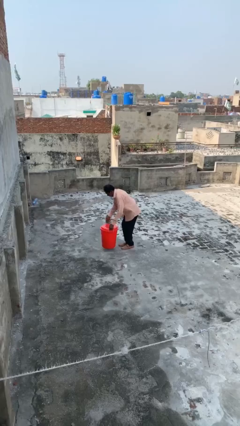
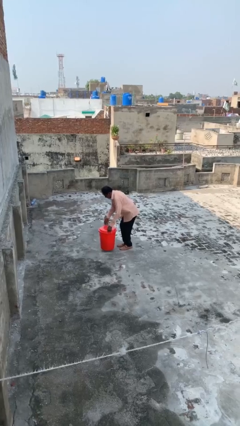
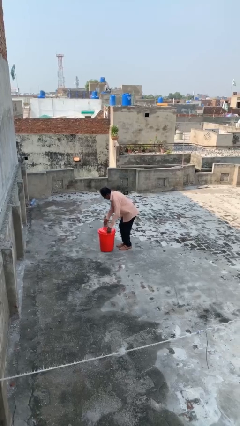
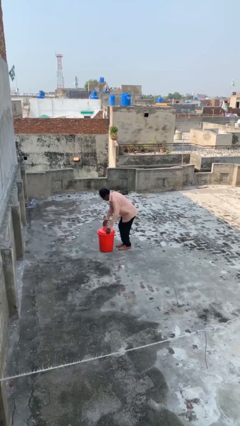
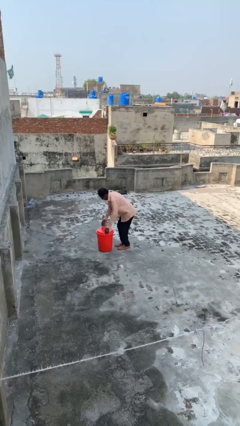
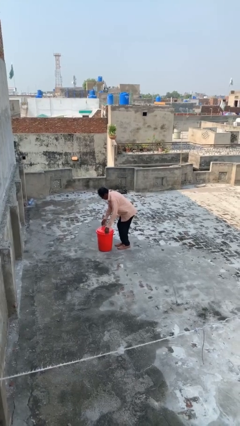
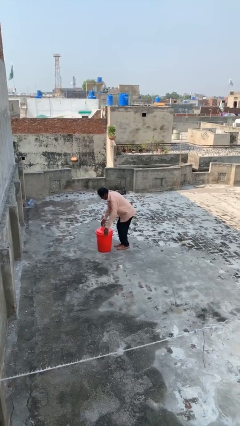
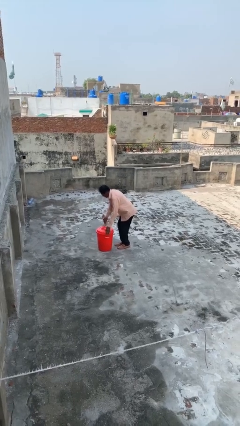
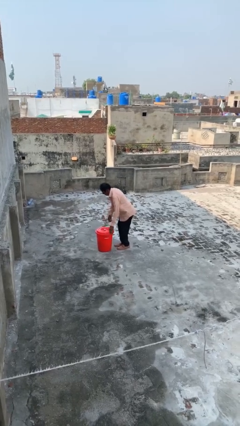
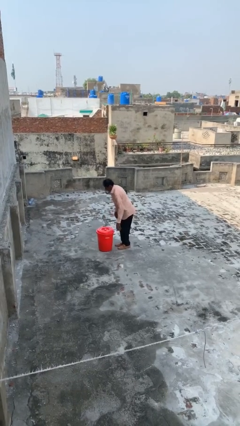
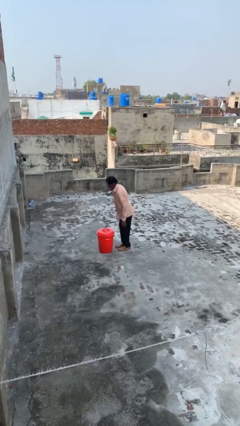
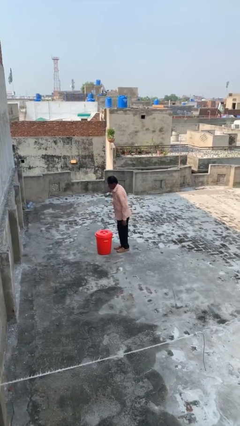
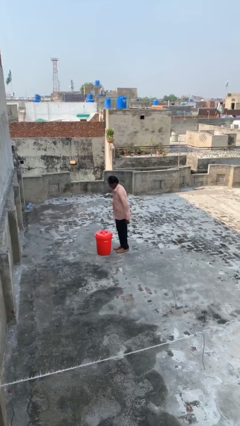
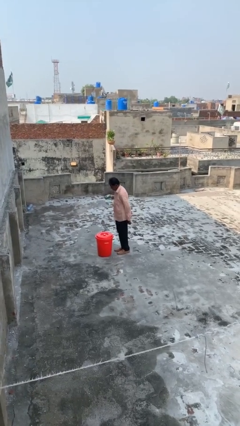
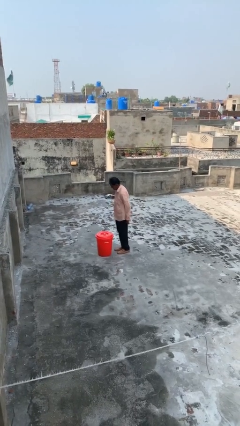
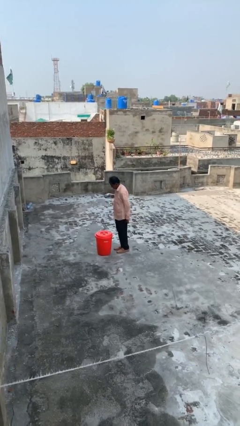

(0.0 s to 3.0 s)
person puts down object on floor

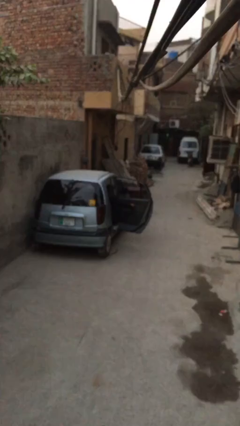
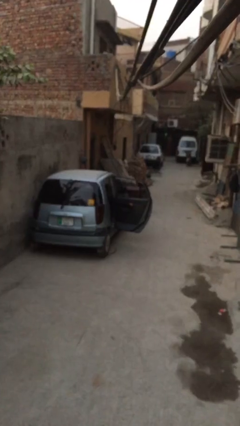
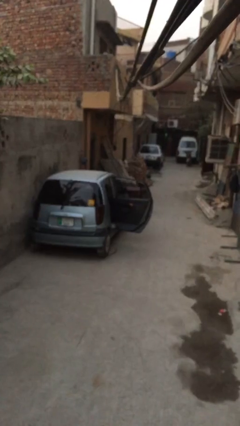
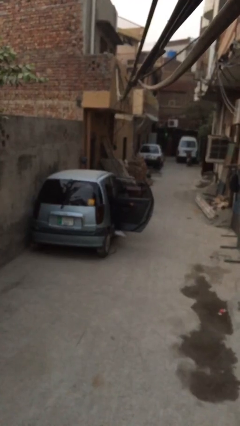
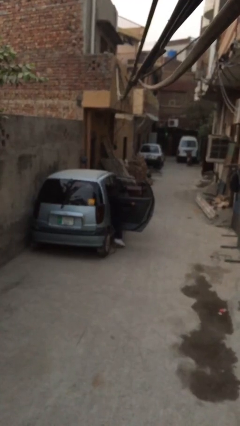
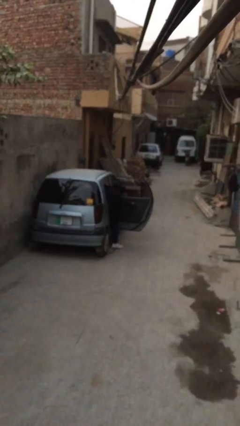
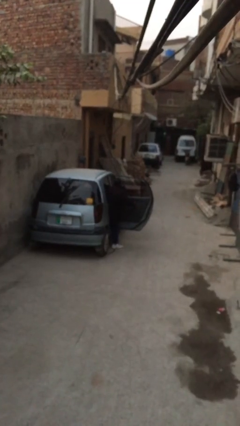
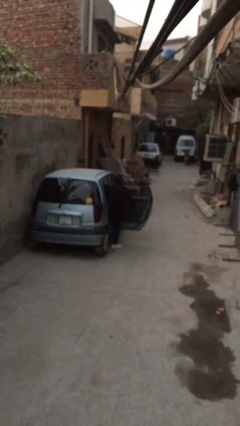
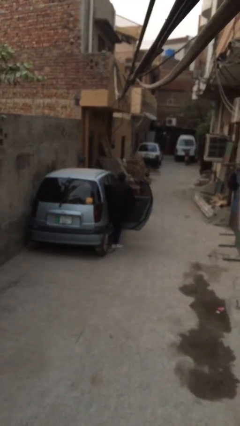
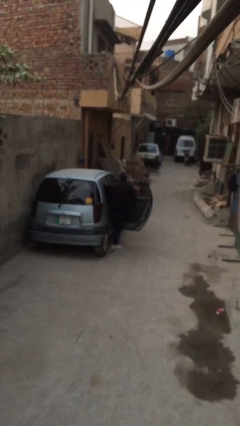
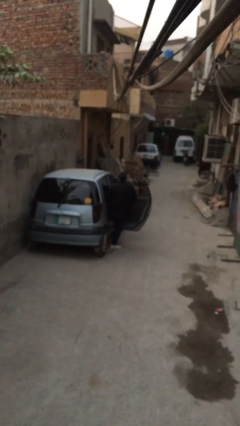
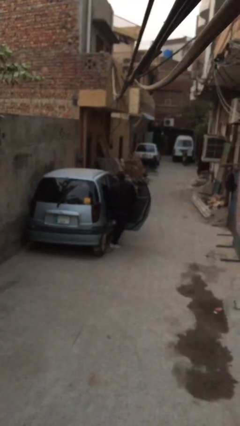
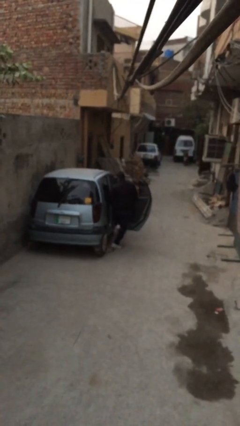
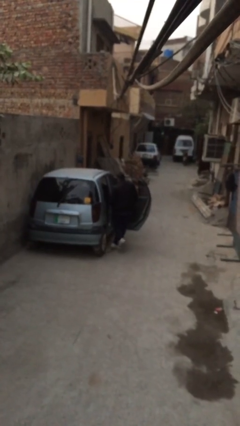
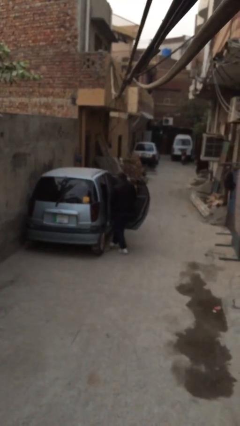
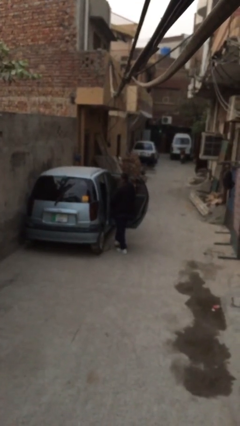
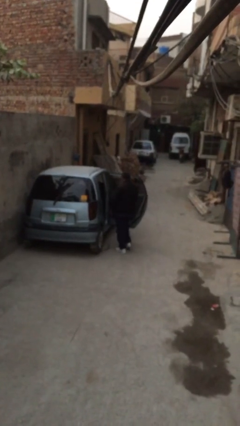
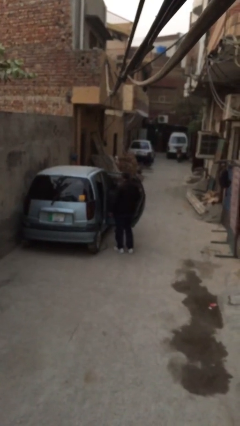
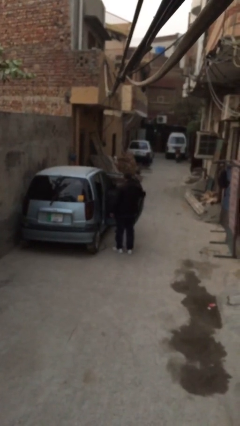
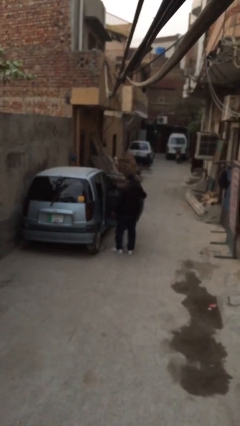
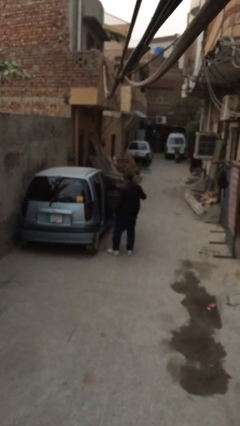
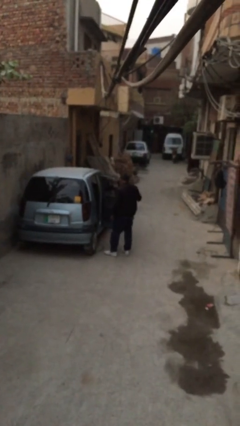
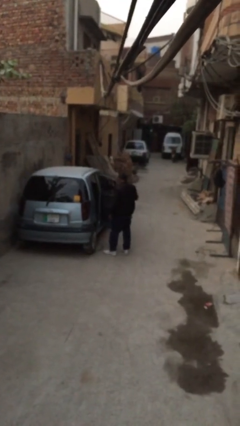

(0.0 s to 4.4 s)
person exits car

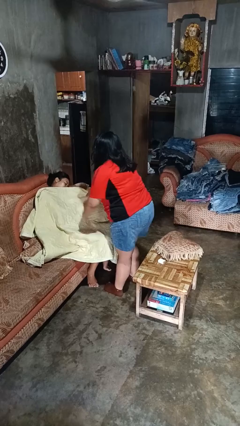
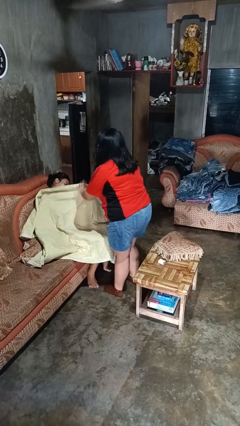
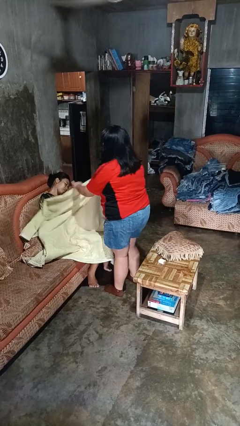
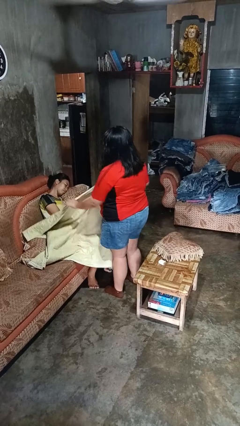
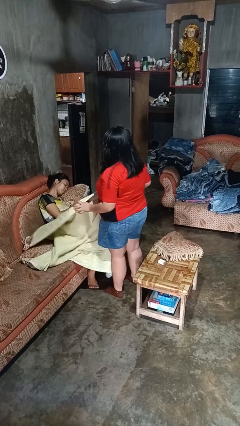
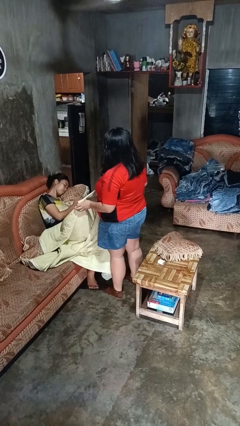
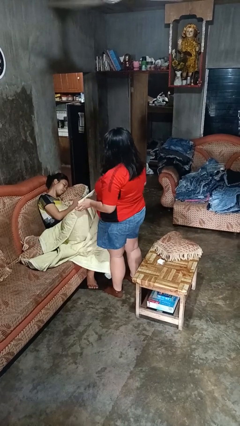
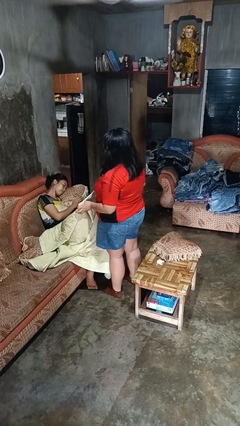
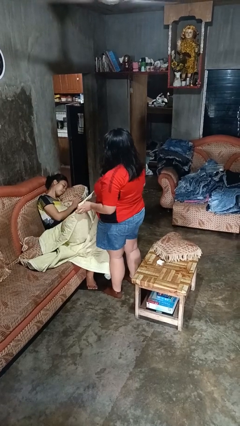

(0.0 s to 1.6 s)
person uncovers friend with blanket

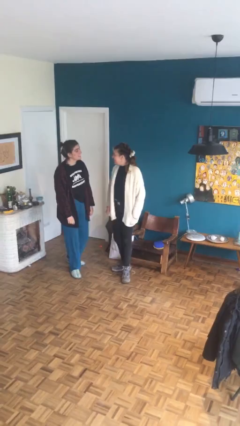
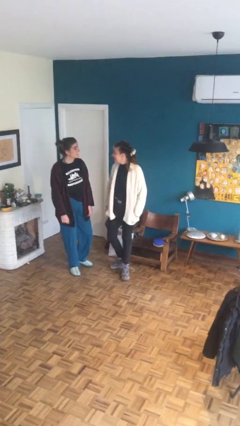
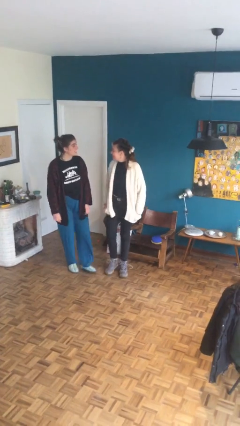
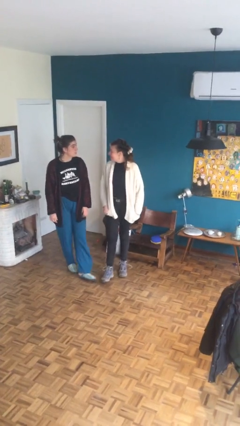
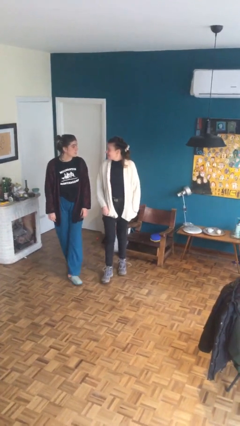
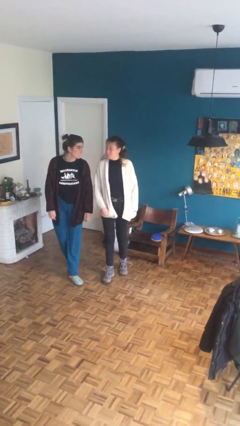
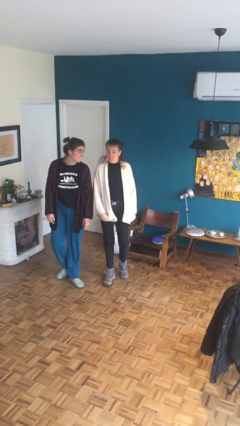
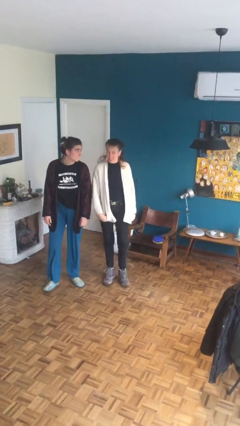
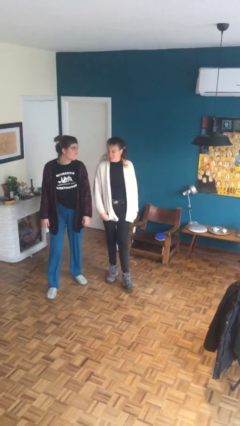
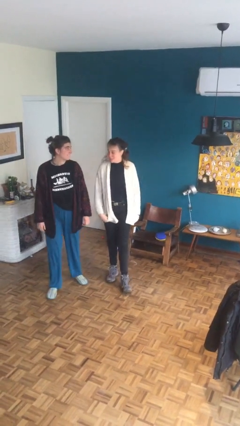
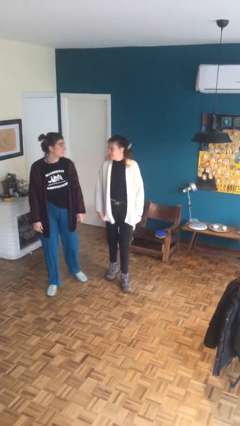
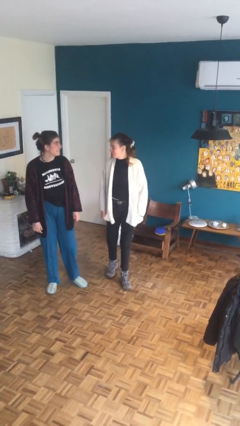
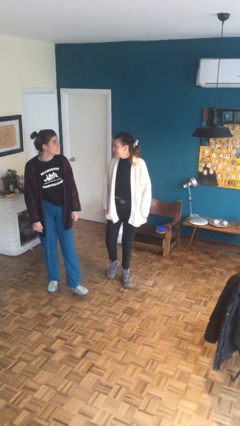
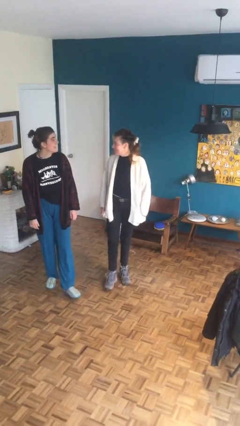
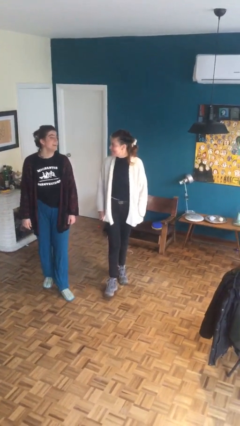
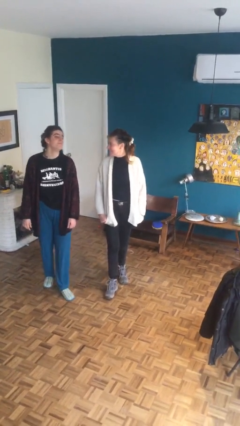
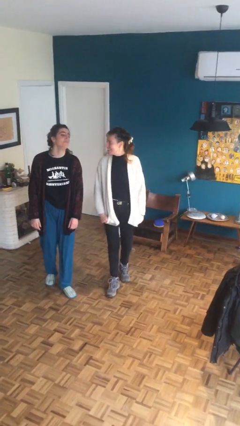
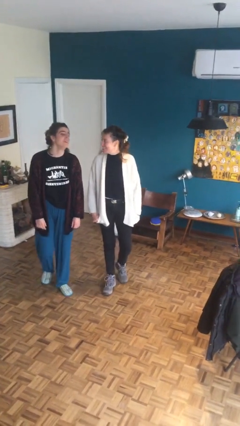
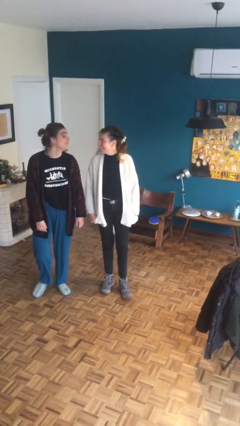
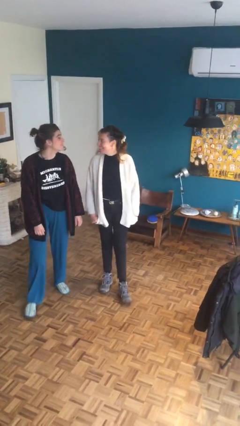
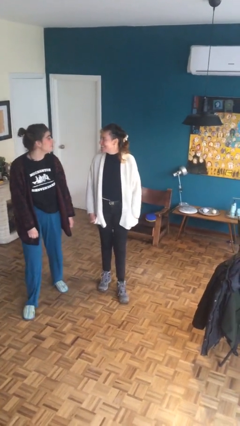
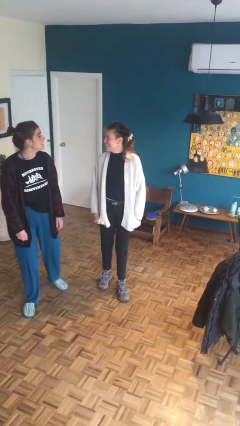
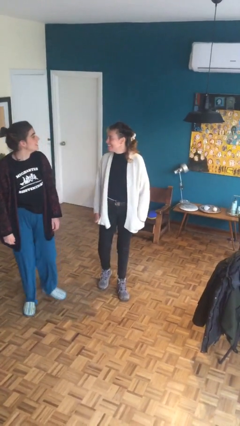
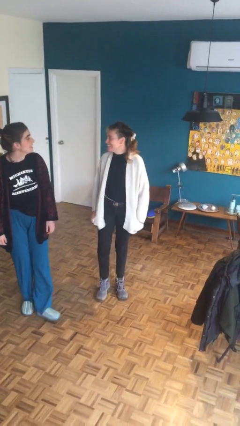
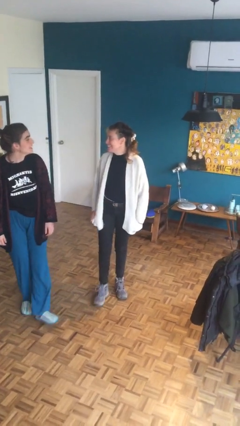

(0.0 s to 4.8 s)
person talks to person

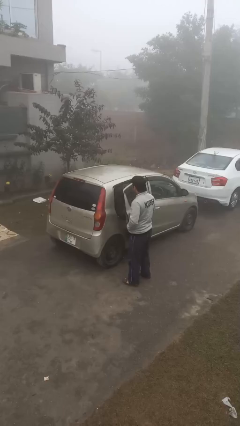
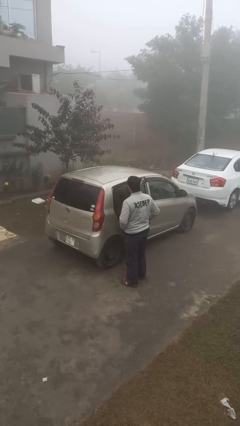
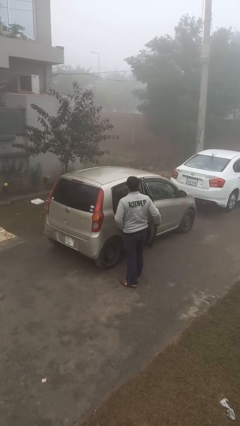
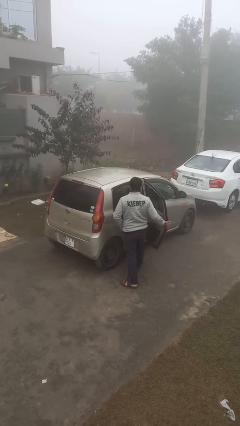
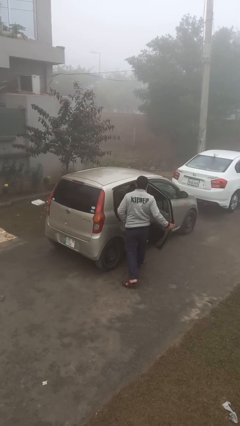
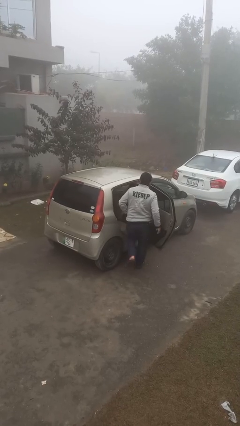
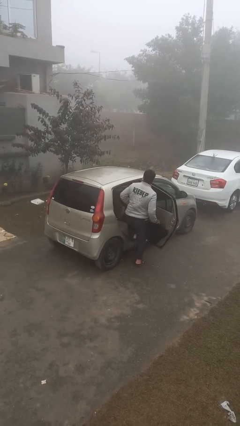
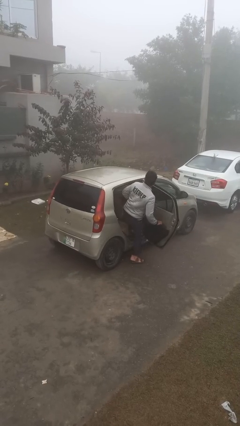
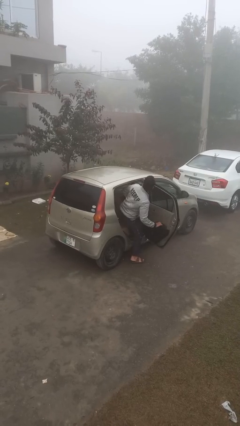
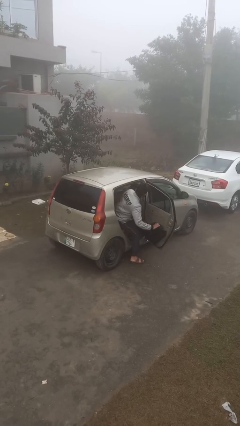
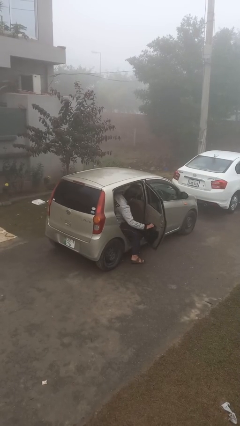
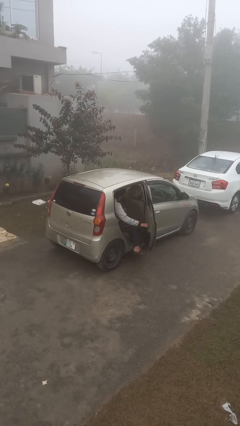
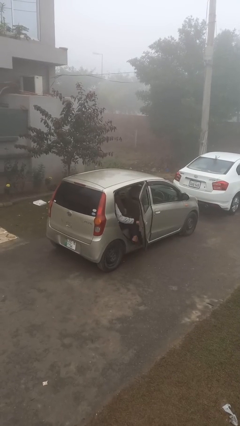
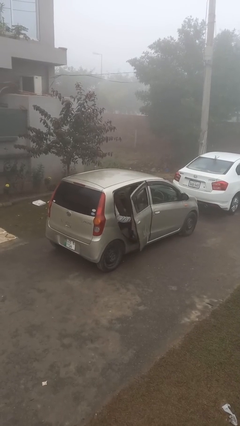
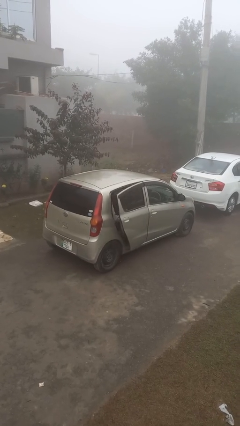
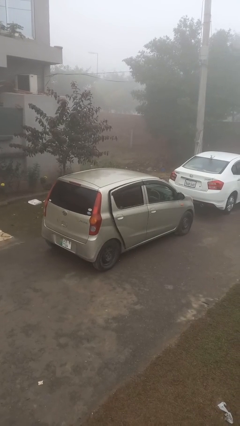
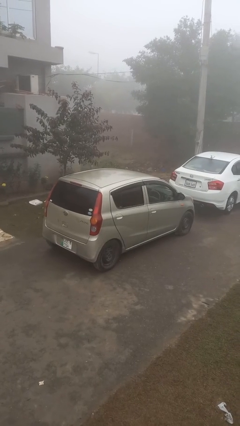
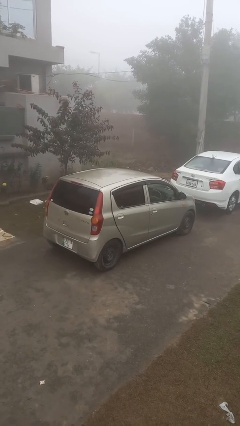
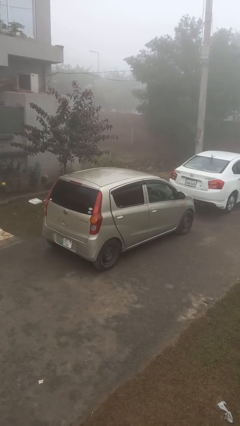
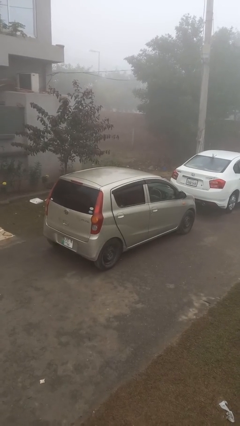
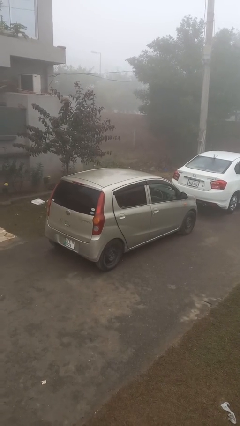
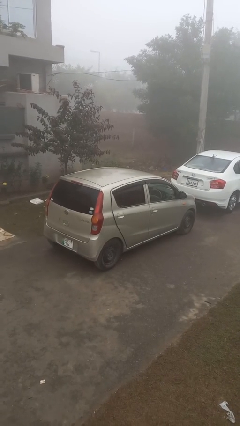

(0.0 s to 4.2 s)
car picks up person
